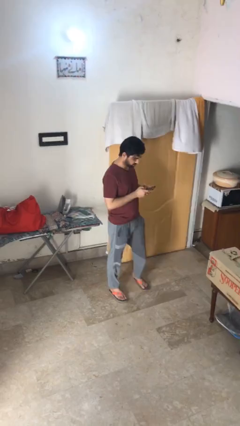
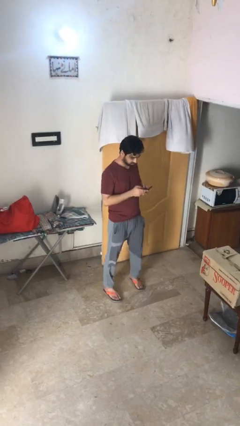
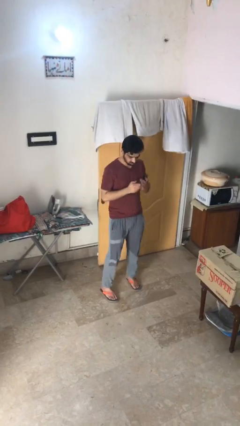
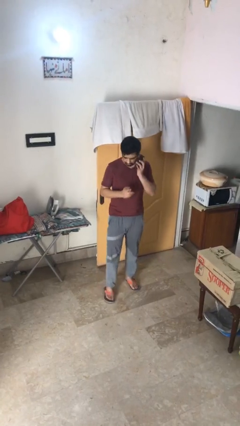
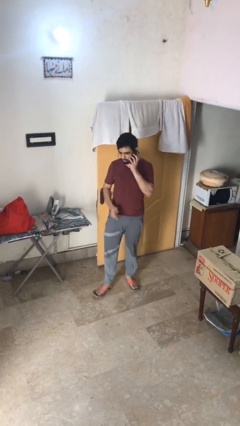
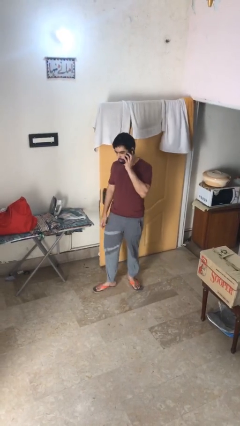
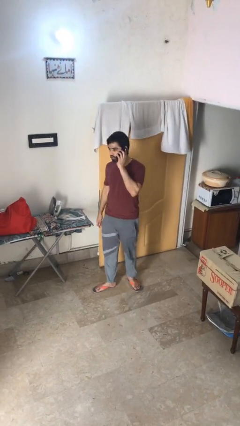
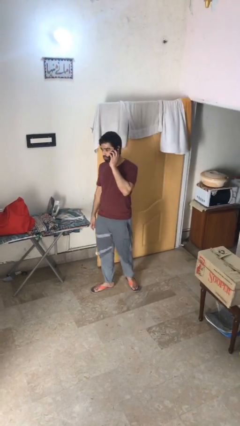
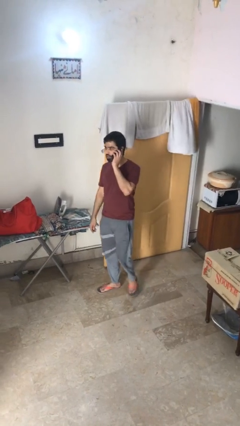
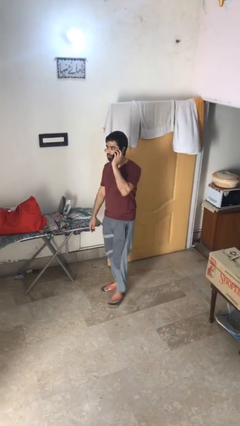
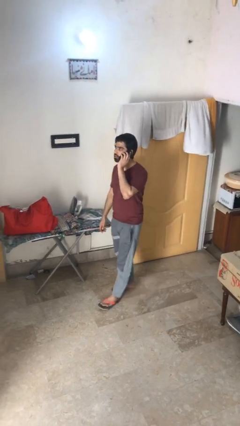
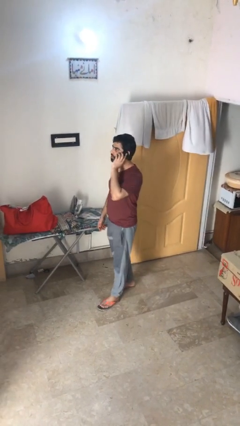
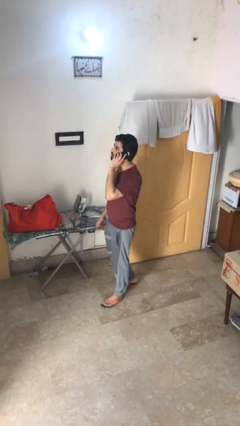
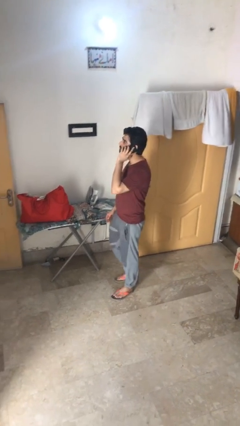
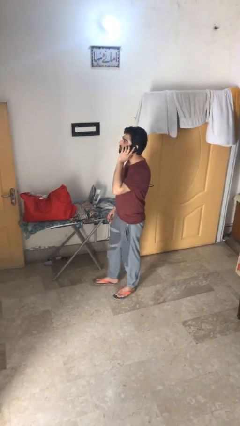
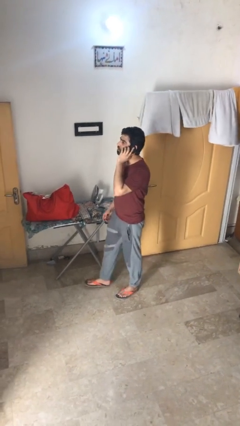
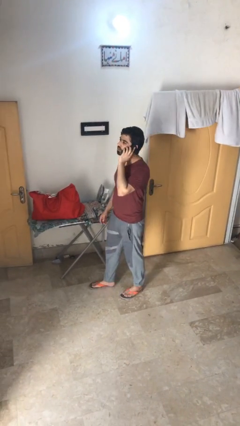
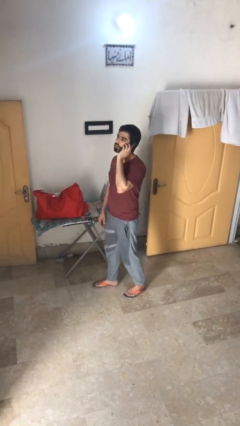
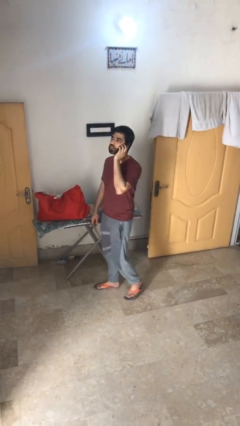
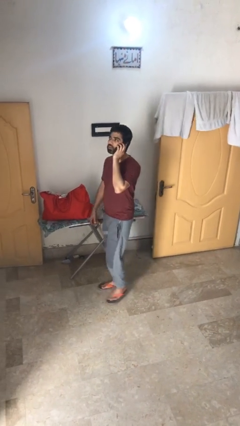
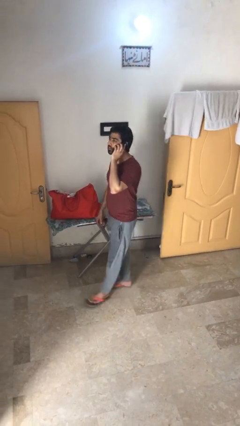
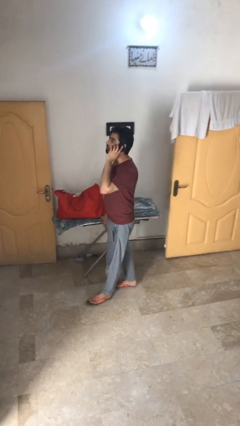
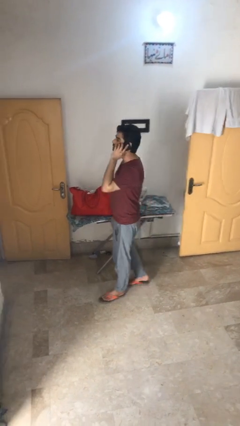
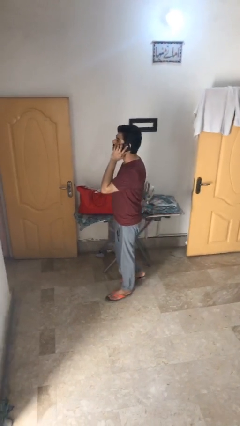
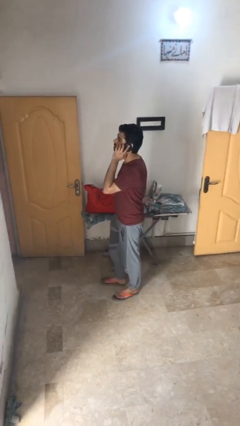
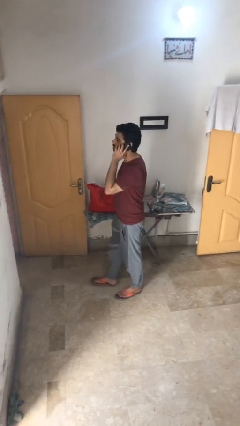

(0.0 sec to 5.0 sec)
person talks on phone

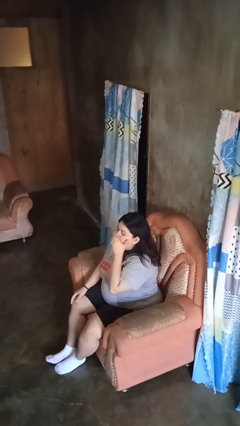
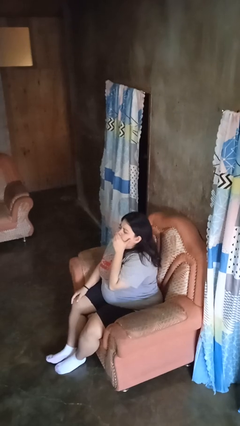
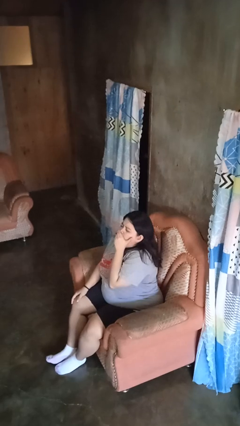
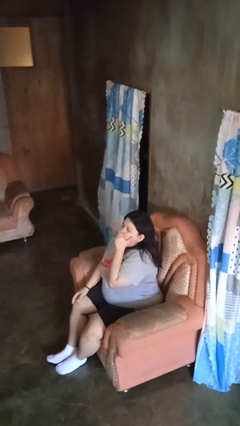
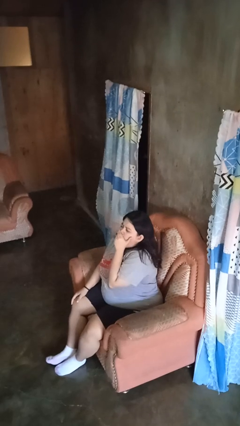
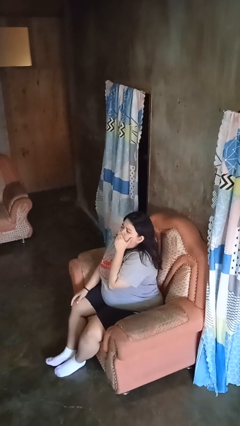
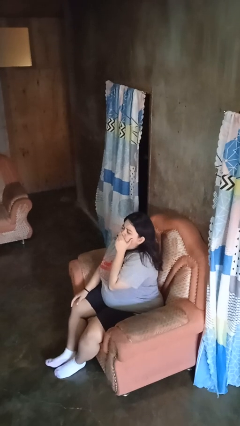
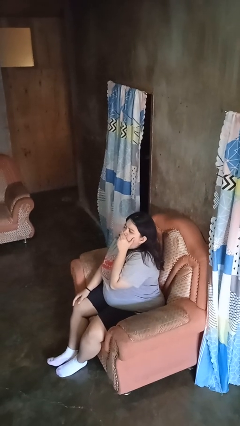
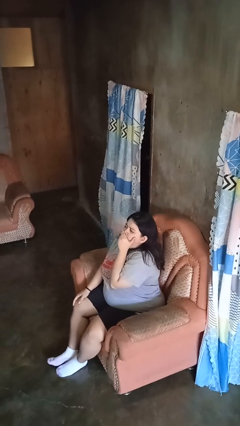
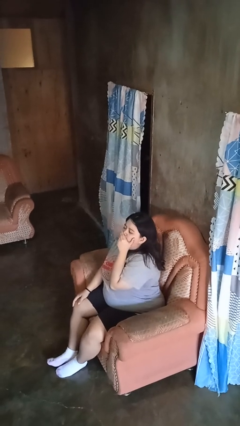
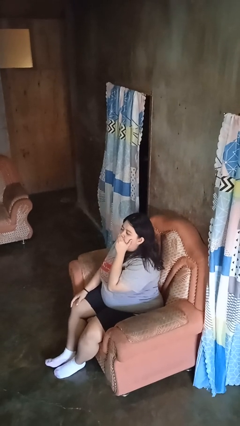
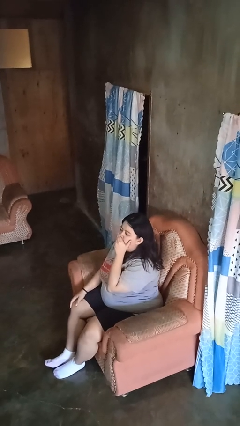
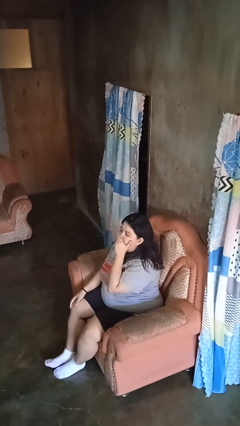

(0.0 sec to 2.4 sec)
person yawns

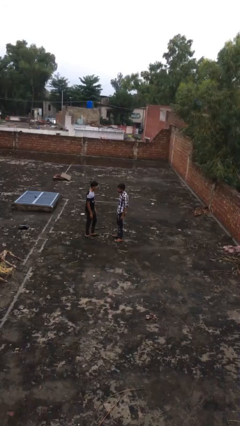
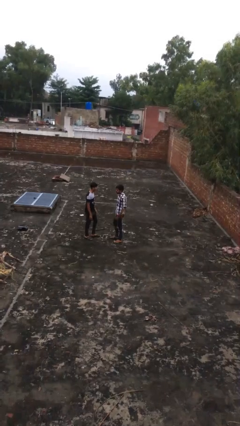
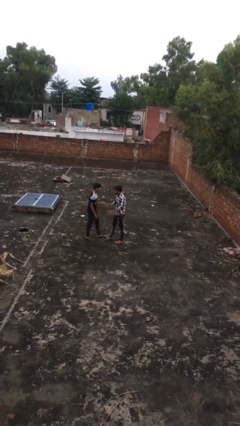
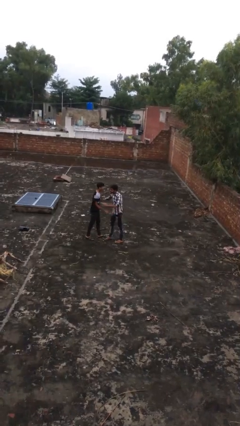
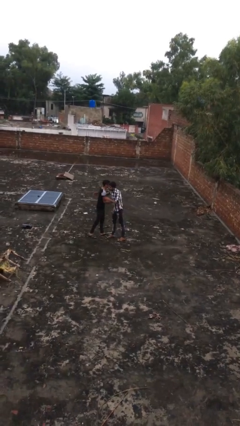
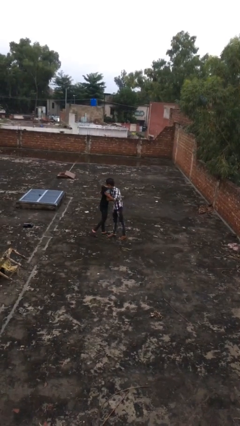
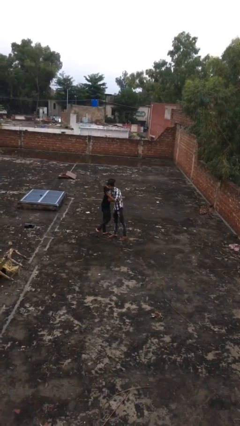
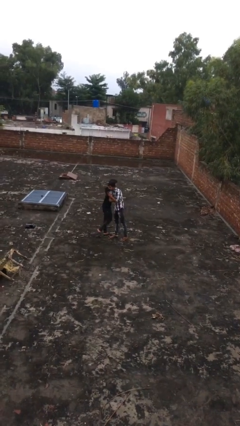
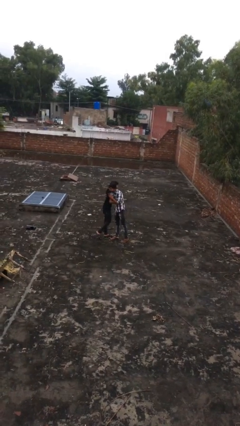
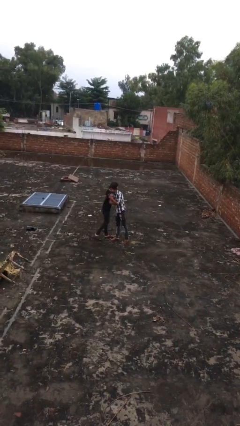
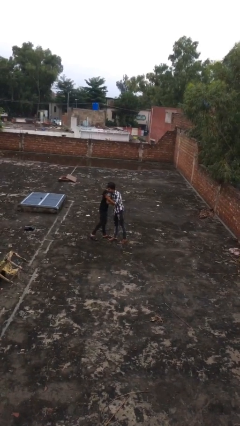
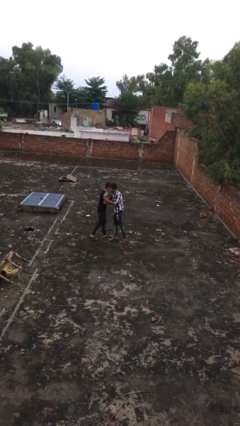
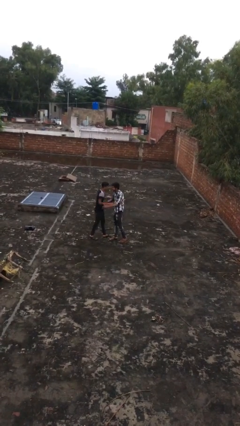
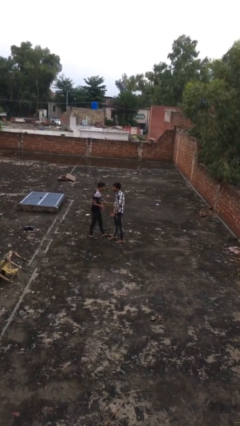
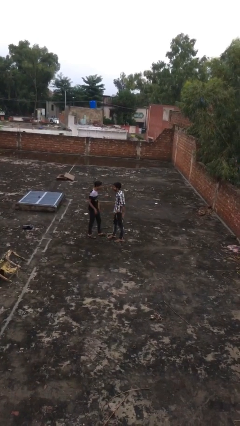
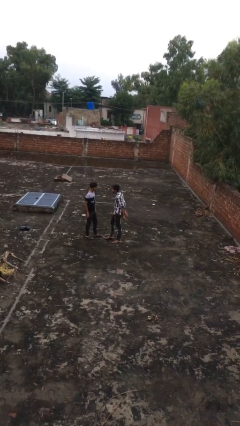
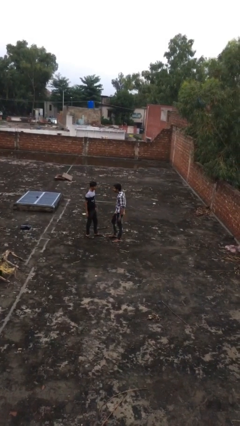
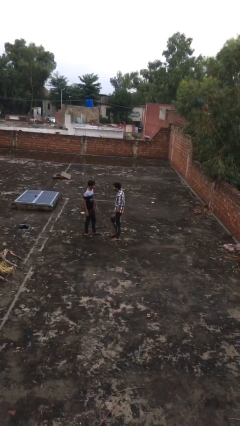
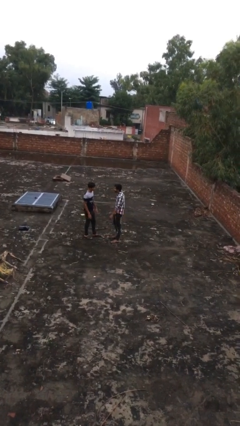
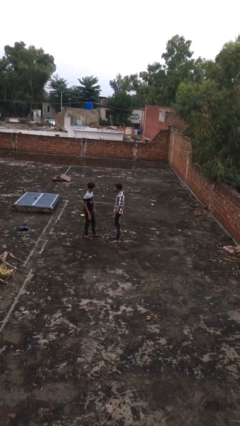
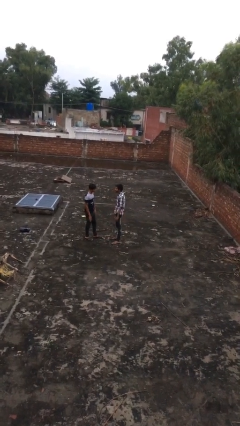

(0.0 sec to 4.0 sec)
person embraces person

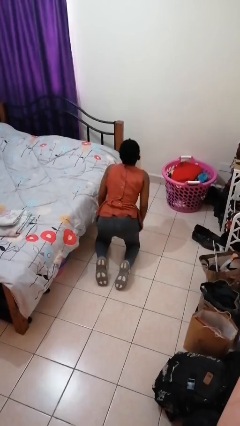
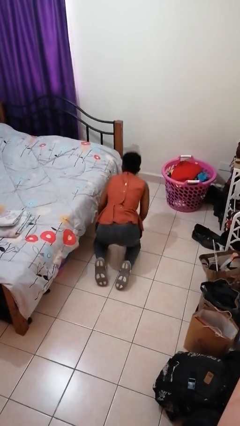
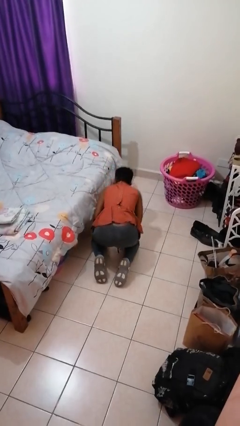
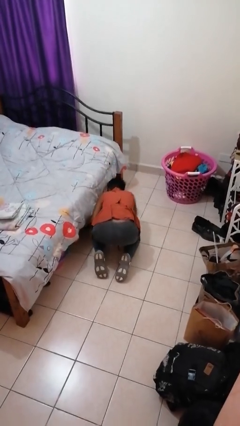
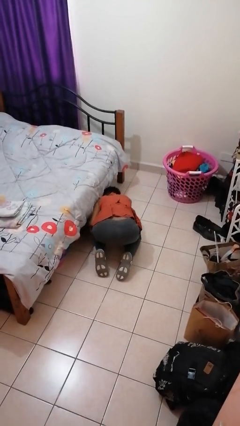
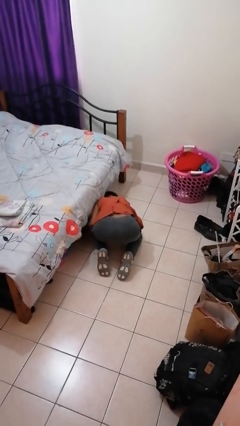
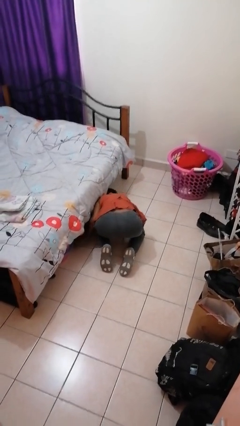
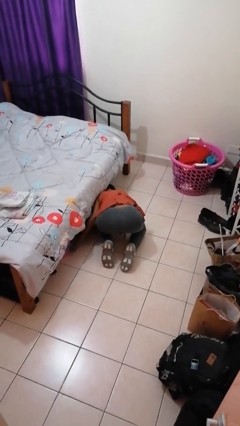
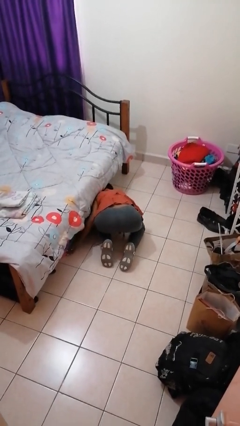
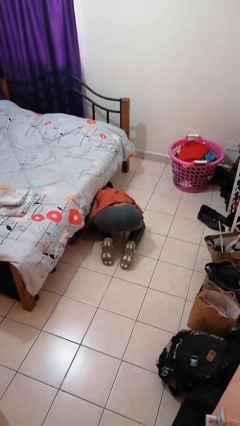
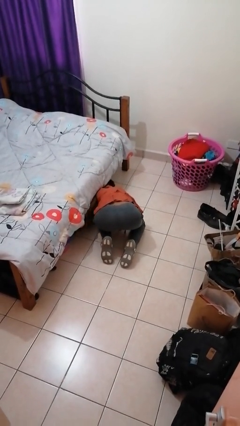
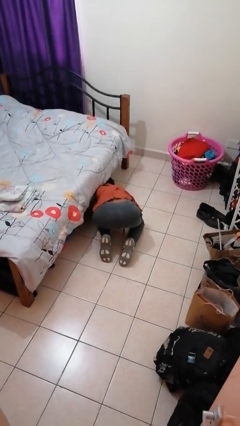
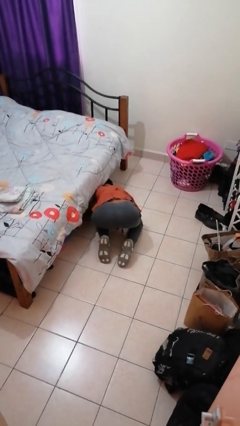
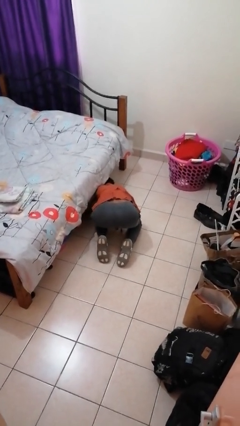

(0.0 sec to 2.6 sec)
person searches under bed

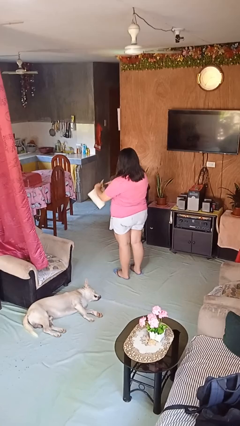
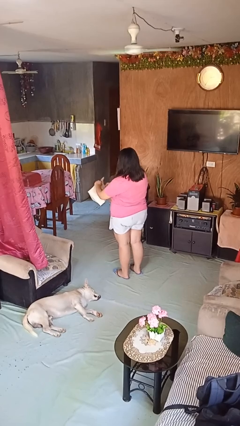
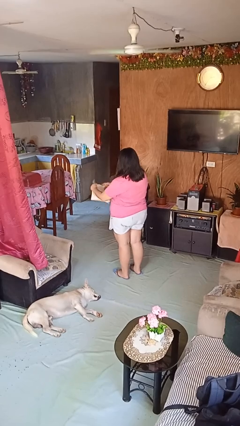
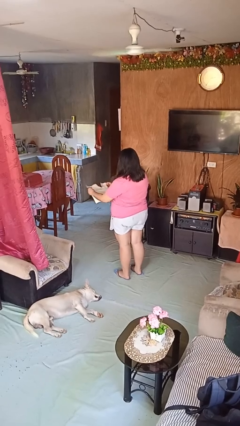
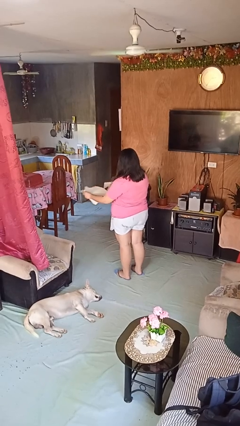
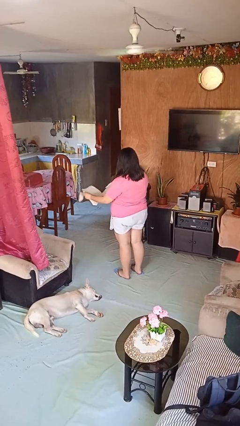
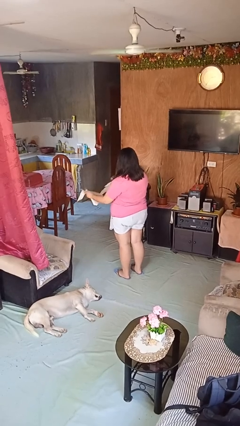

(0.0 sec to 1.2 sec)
person tears paper

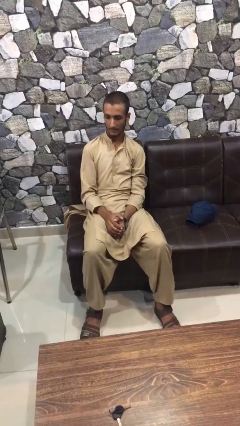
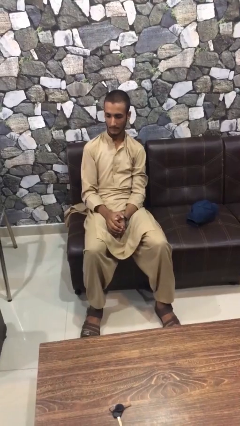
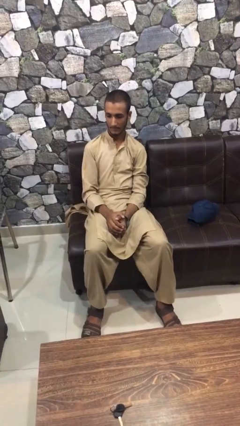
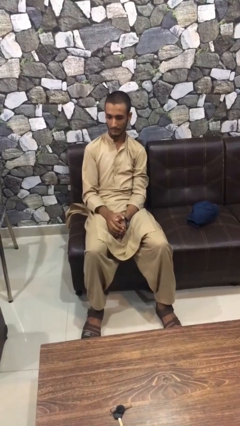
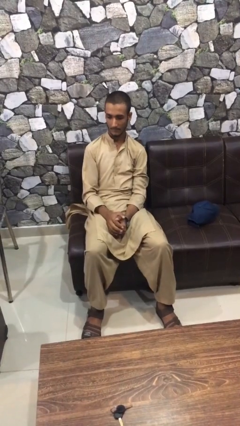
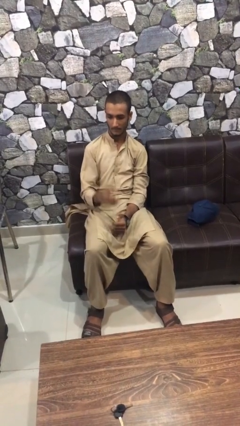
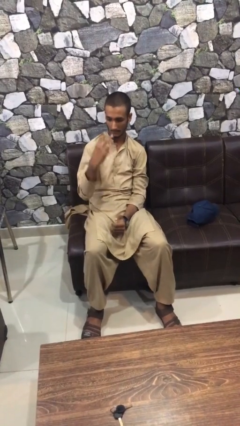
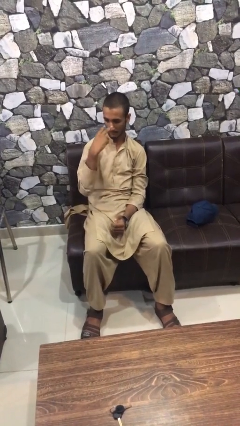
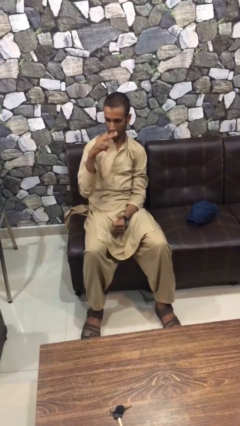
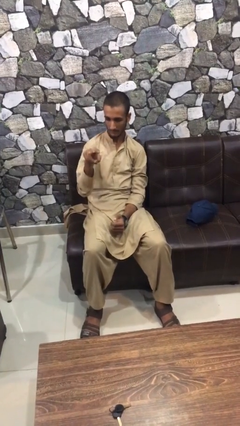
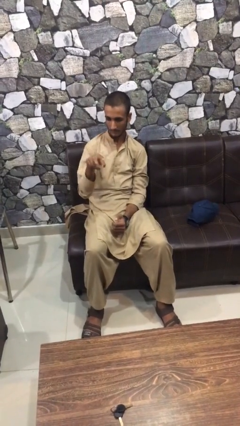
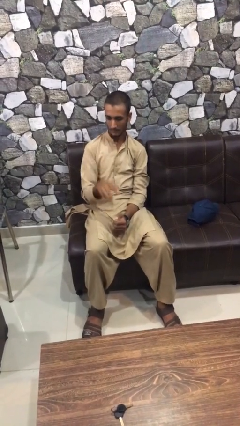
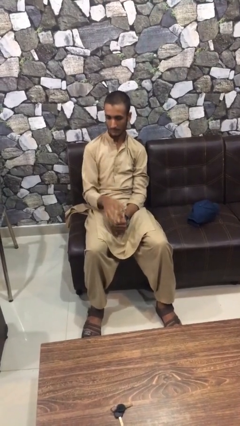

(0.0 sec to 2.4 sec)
person gestures watch closely
